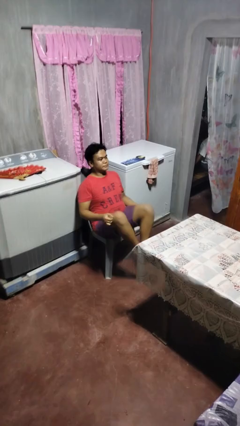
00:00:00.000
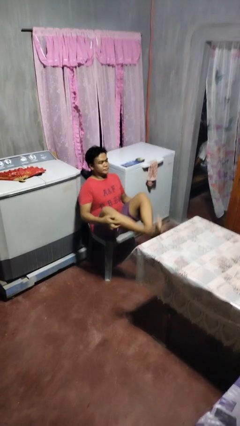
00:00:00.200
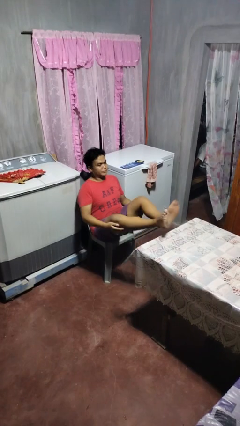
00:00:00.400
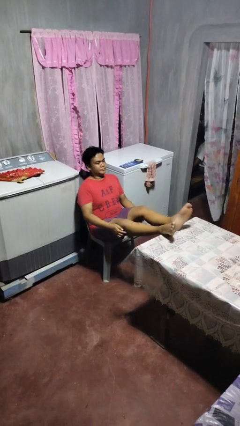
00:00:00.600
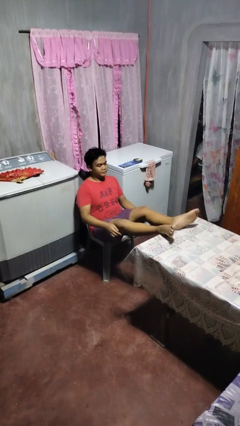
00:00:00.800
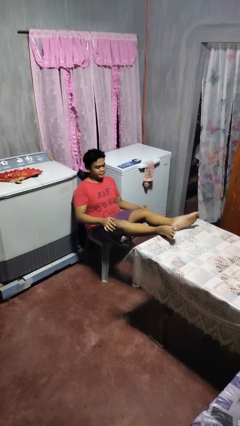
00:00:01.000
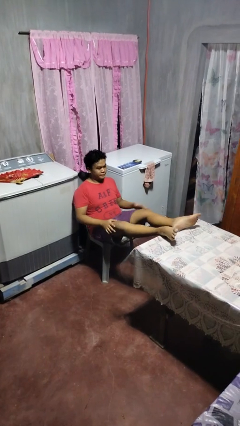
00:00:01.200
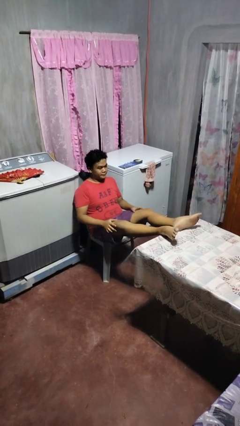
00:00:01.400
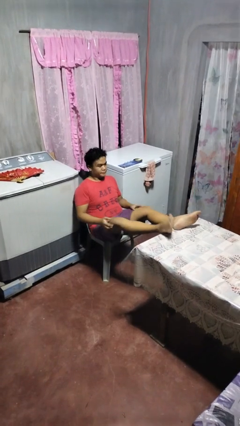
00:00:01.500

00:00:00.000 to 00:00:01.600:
person puts feet up

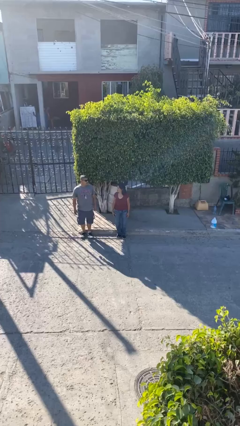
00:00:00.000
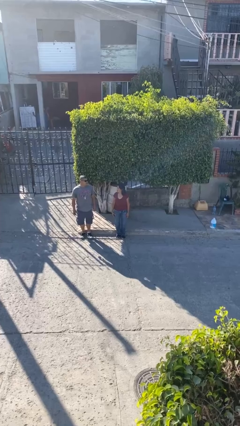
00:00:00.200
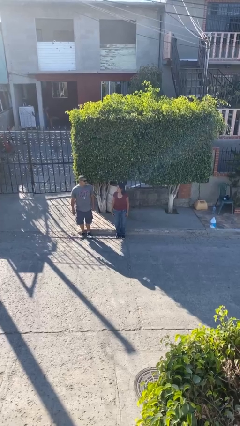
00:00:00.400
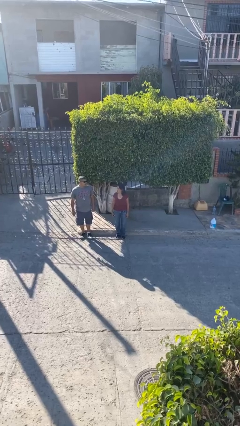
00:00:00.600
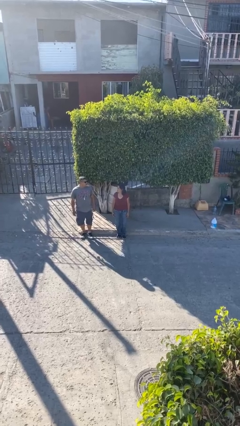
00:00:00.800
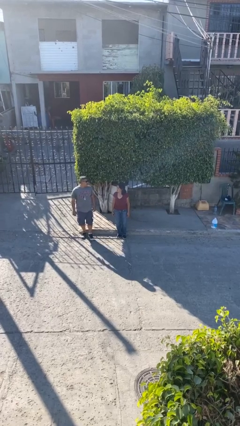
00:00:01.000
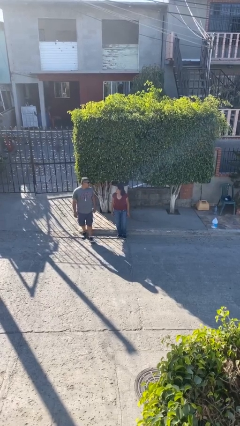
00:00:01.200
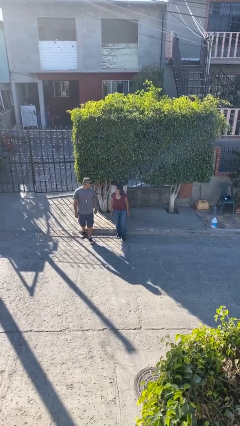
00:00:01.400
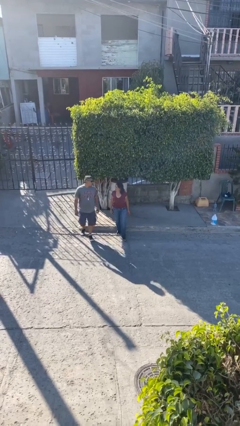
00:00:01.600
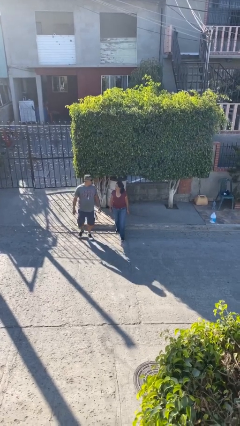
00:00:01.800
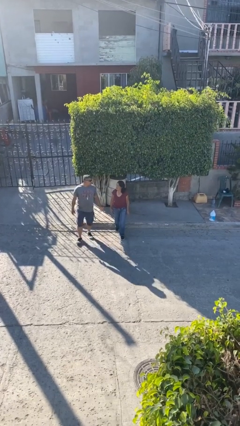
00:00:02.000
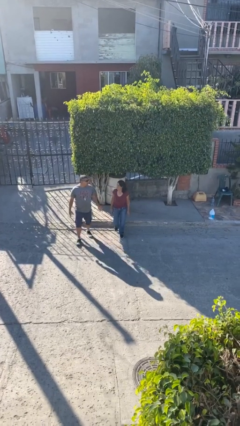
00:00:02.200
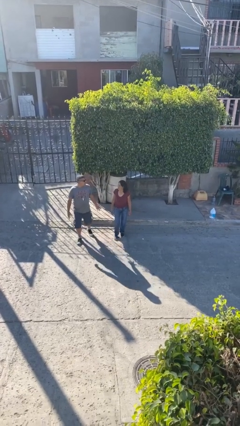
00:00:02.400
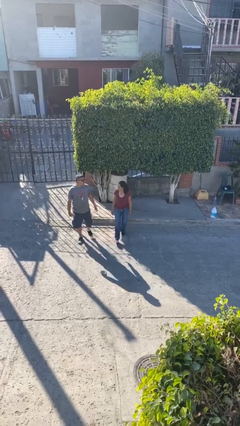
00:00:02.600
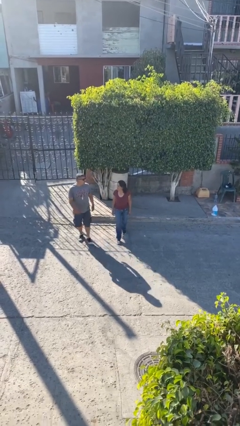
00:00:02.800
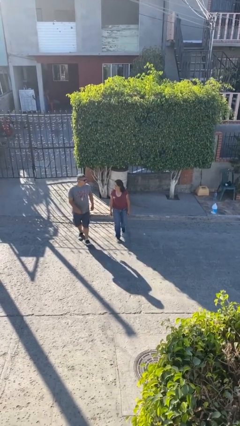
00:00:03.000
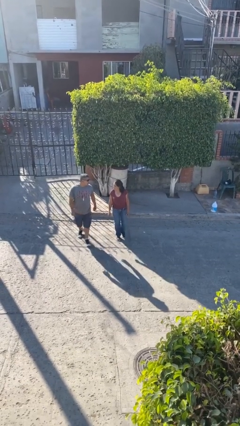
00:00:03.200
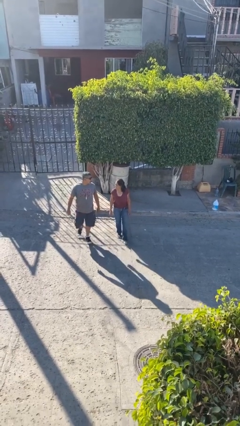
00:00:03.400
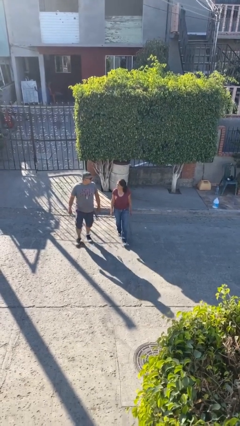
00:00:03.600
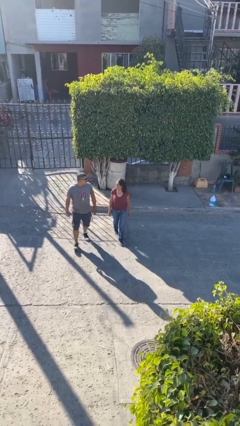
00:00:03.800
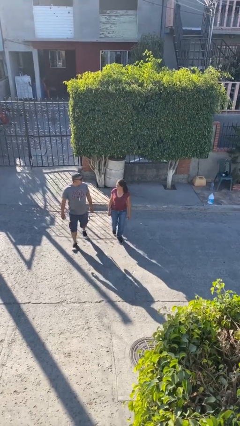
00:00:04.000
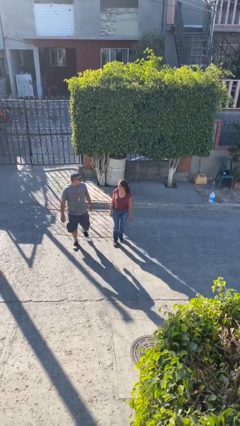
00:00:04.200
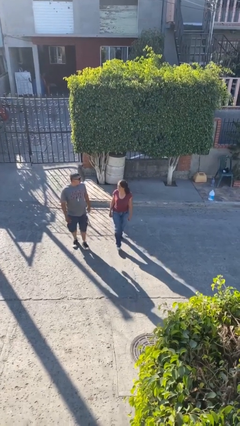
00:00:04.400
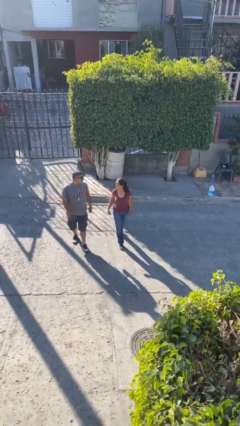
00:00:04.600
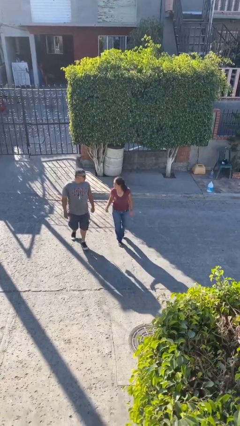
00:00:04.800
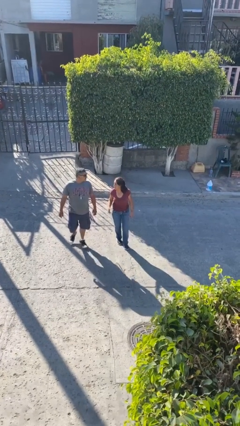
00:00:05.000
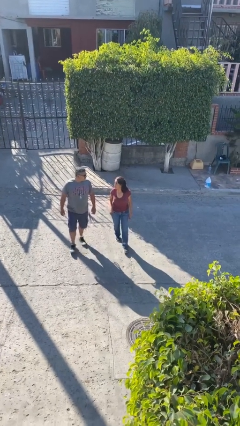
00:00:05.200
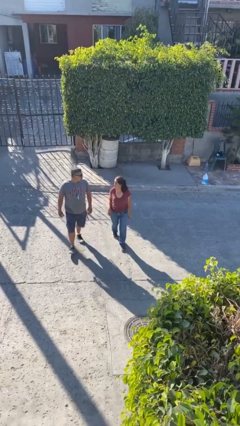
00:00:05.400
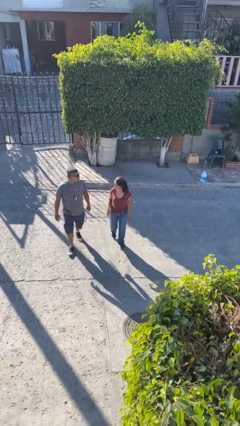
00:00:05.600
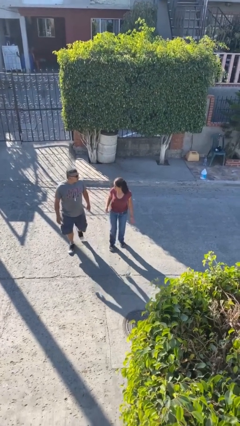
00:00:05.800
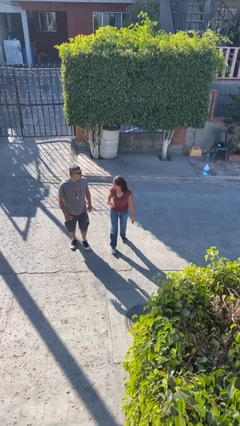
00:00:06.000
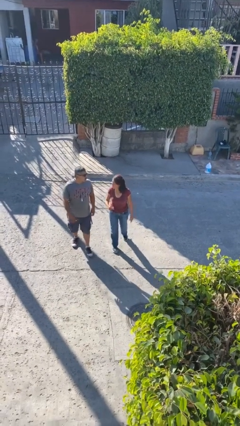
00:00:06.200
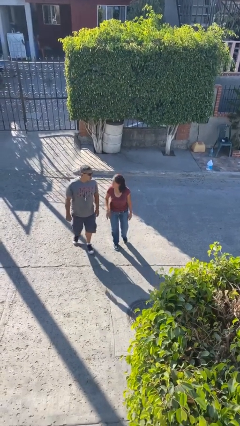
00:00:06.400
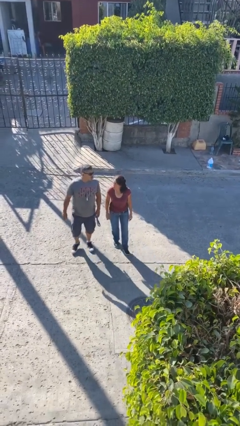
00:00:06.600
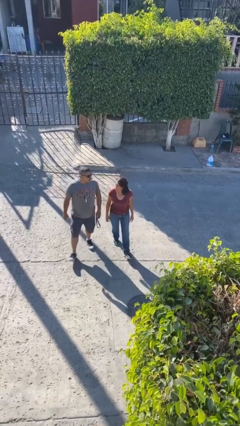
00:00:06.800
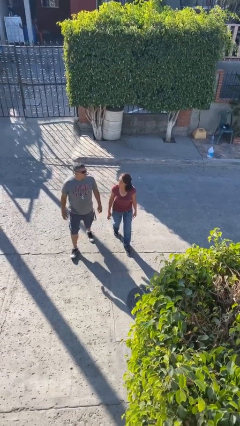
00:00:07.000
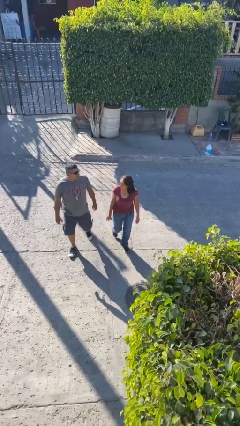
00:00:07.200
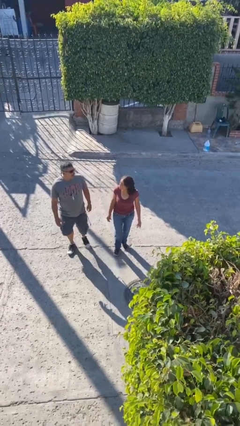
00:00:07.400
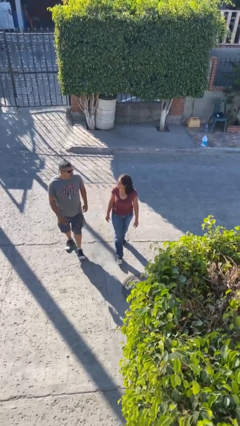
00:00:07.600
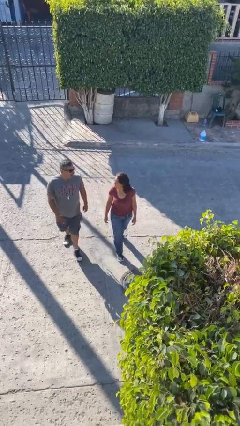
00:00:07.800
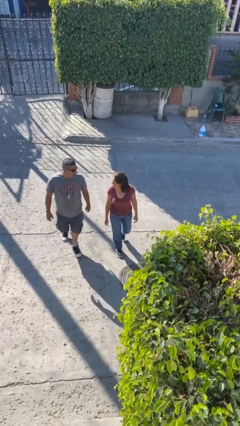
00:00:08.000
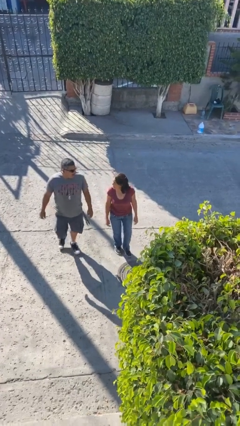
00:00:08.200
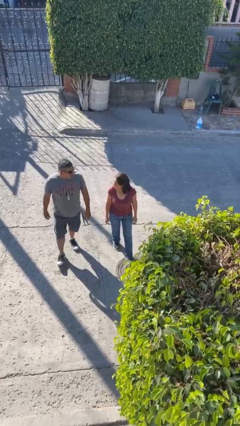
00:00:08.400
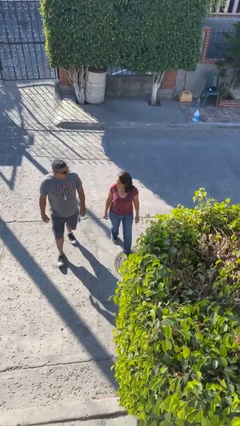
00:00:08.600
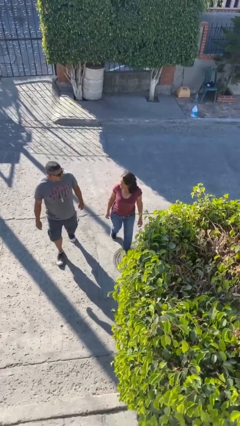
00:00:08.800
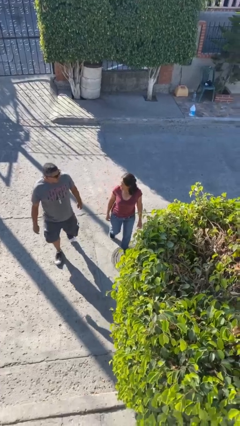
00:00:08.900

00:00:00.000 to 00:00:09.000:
person talks to person

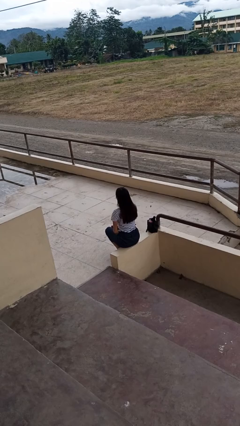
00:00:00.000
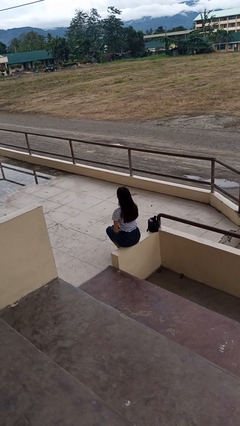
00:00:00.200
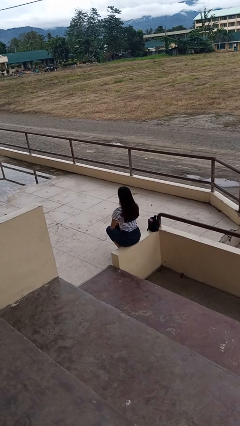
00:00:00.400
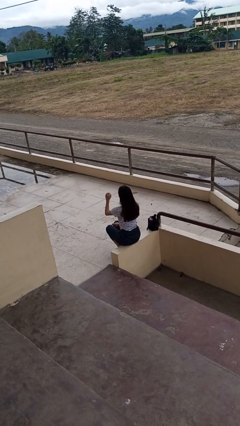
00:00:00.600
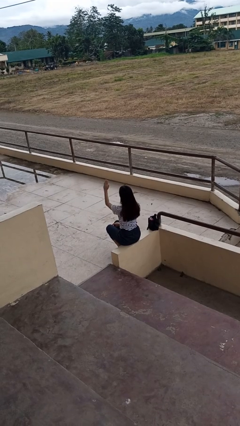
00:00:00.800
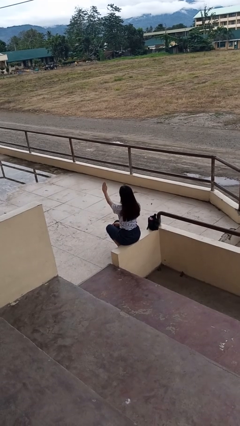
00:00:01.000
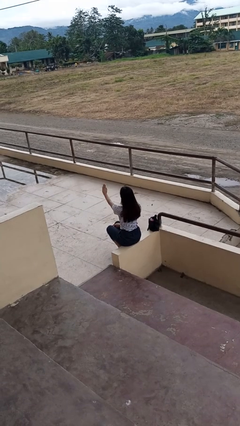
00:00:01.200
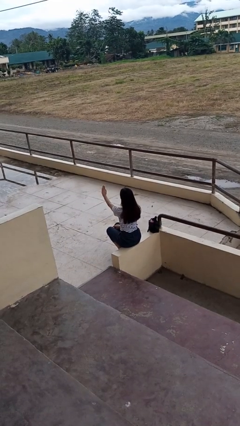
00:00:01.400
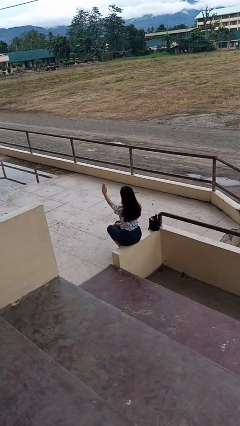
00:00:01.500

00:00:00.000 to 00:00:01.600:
person gestures stop

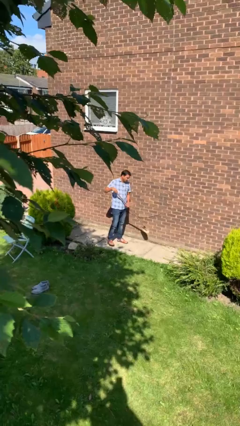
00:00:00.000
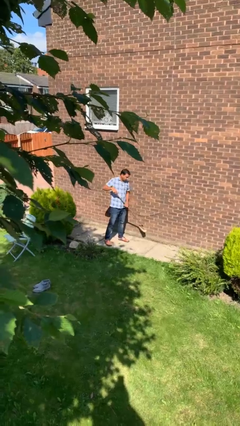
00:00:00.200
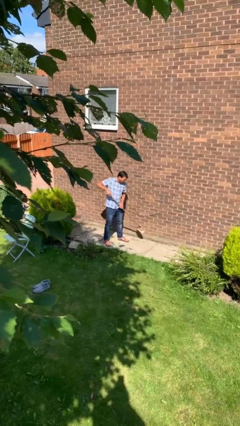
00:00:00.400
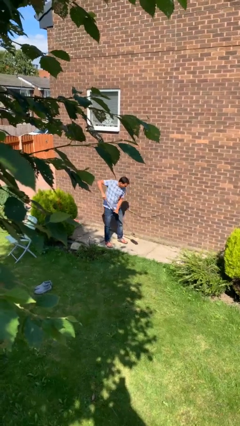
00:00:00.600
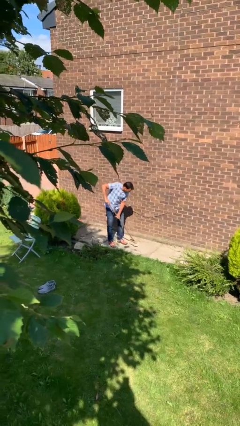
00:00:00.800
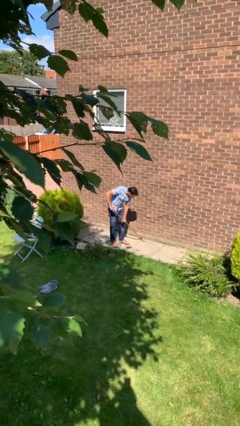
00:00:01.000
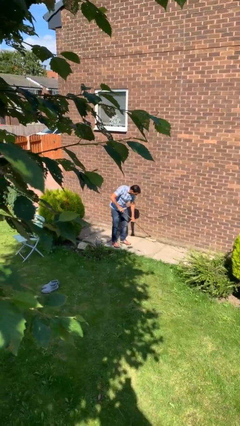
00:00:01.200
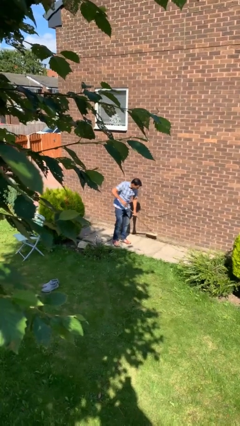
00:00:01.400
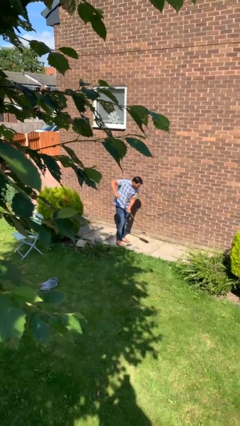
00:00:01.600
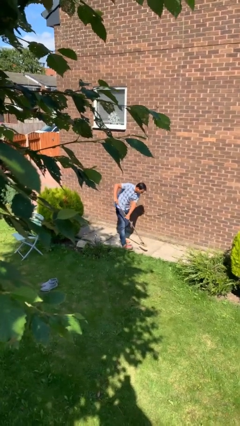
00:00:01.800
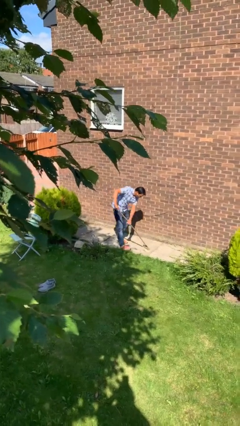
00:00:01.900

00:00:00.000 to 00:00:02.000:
person sweeps floor

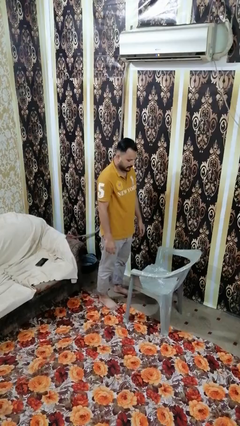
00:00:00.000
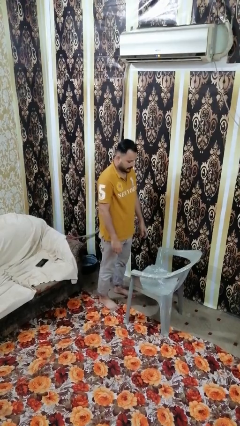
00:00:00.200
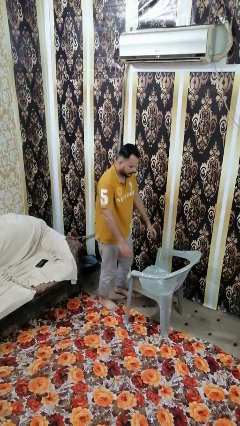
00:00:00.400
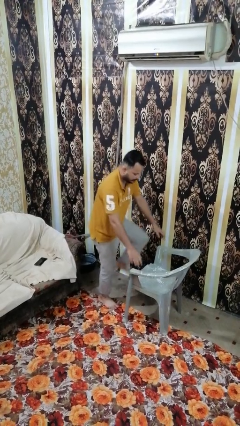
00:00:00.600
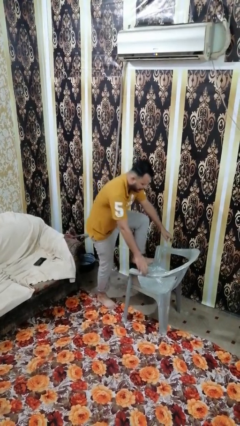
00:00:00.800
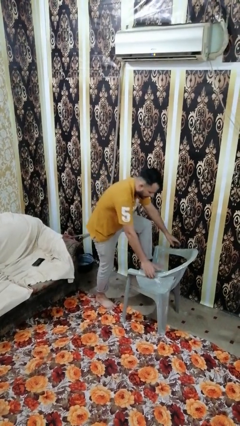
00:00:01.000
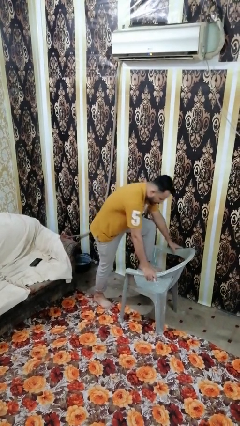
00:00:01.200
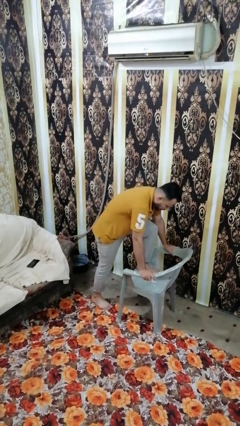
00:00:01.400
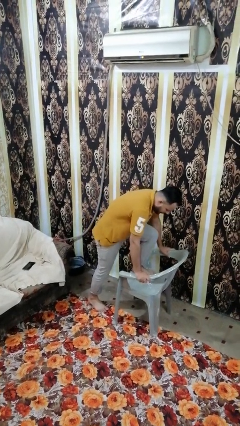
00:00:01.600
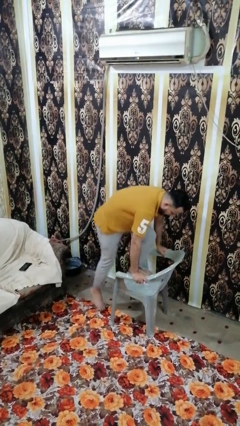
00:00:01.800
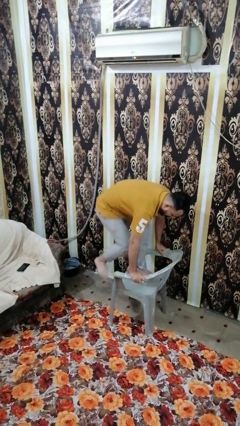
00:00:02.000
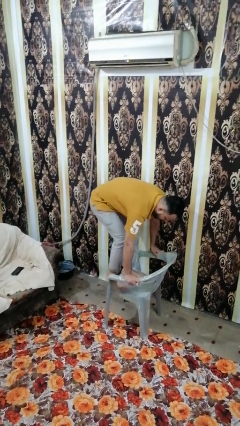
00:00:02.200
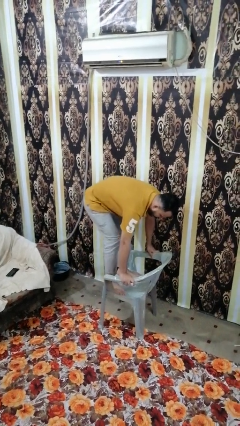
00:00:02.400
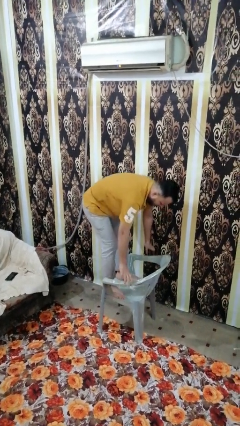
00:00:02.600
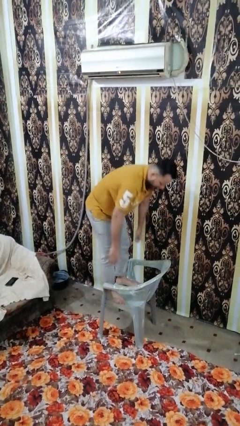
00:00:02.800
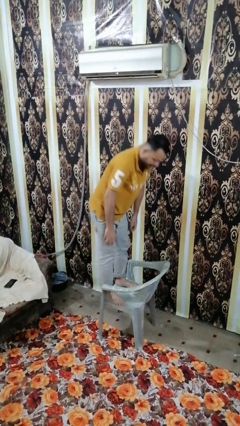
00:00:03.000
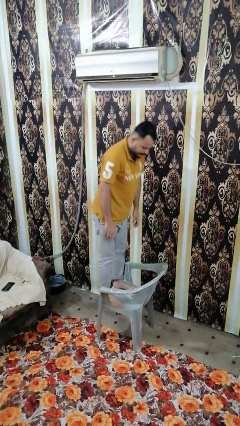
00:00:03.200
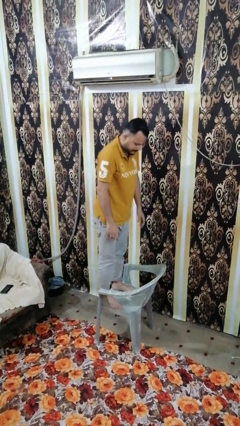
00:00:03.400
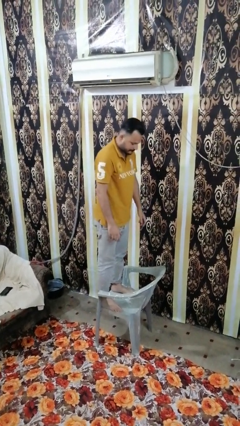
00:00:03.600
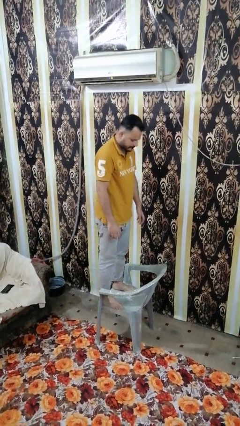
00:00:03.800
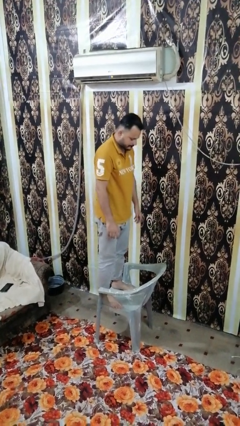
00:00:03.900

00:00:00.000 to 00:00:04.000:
person climbs on chair
